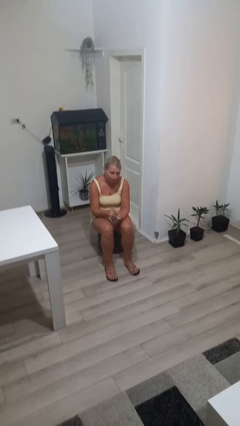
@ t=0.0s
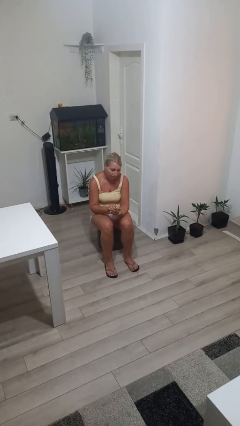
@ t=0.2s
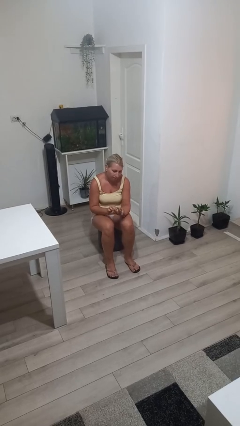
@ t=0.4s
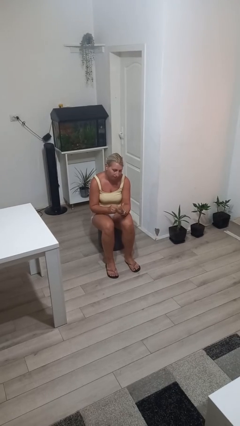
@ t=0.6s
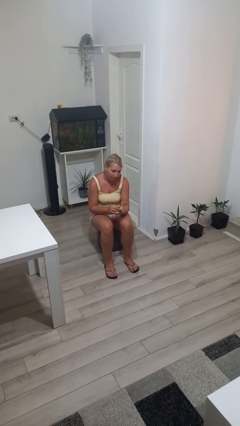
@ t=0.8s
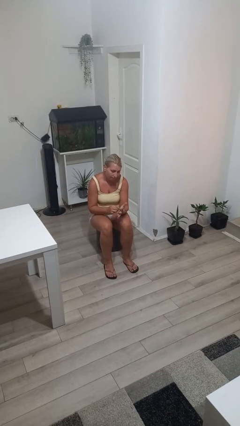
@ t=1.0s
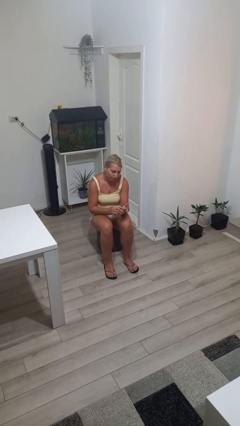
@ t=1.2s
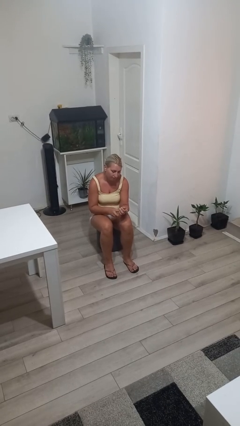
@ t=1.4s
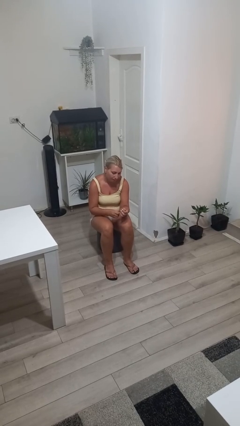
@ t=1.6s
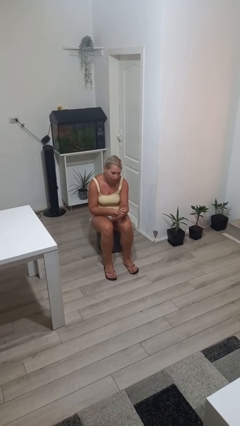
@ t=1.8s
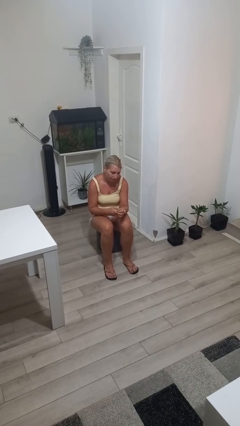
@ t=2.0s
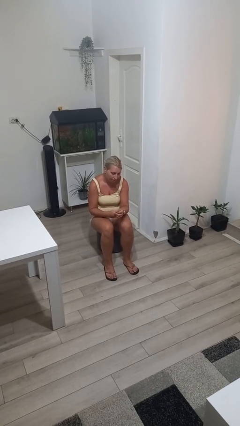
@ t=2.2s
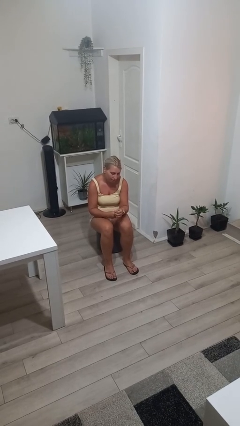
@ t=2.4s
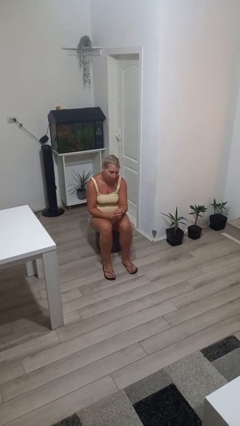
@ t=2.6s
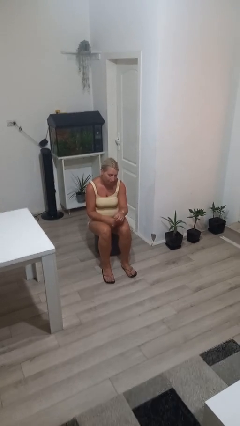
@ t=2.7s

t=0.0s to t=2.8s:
person puts on wristwatch

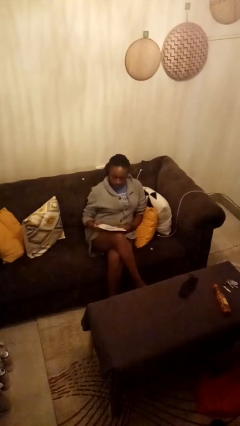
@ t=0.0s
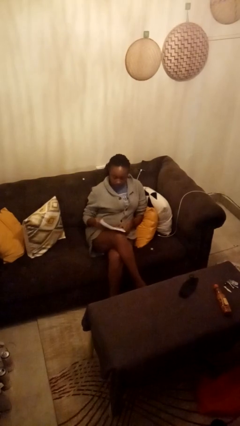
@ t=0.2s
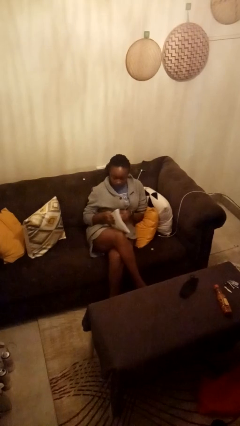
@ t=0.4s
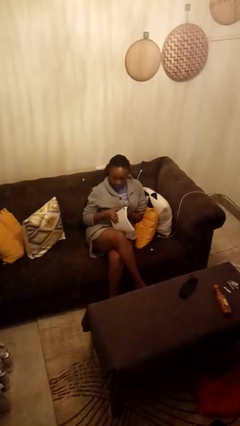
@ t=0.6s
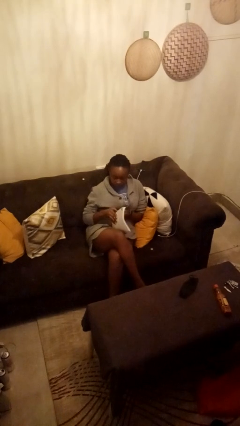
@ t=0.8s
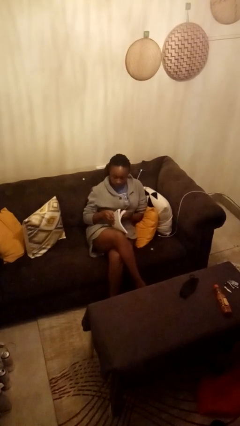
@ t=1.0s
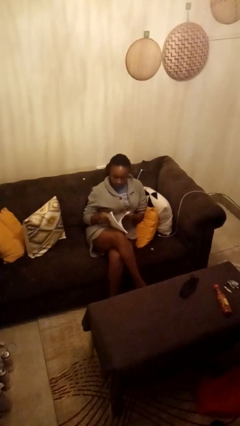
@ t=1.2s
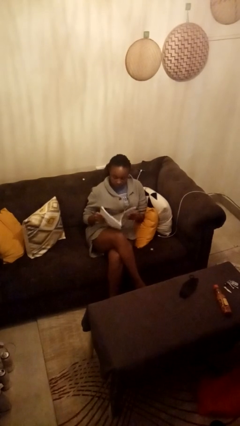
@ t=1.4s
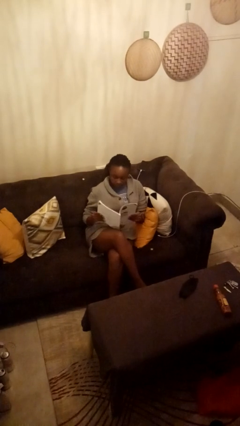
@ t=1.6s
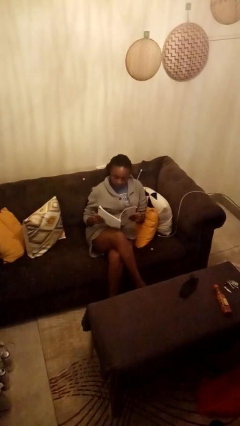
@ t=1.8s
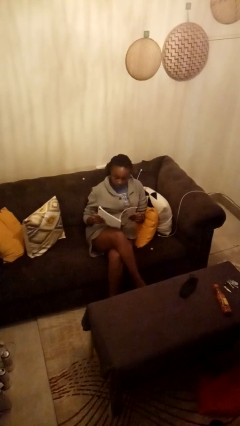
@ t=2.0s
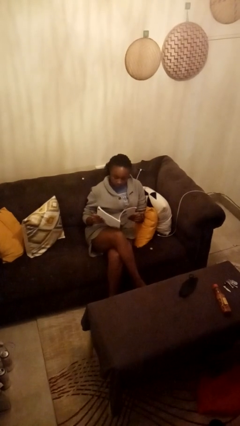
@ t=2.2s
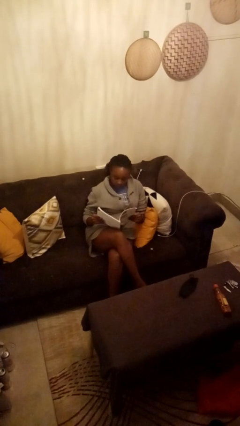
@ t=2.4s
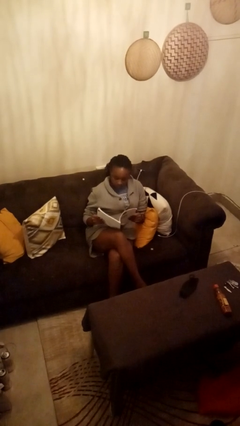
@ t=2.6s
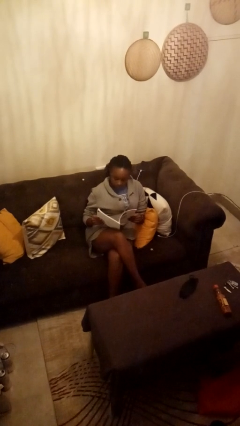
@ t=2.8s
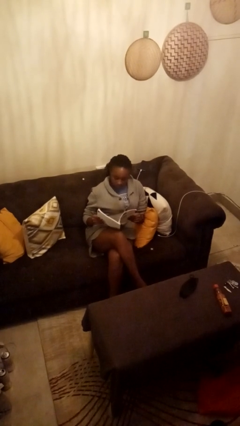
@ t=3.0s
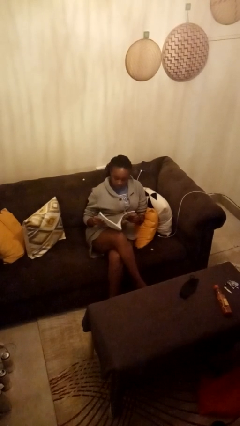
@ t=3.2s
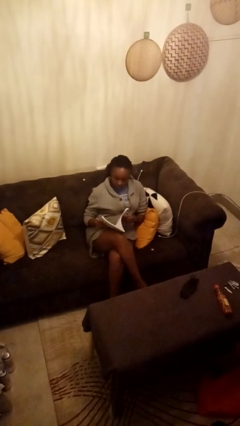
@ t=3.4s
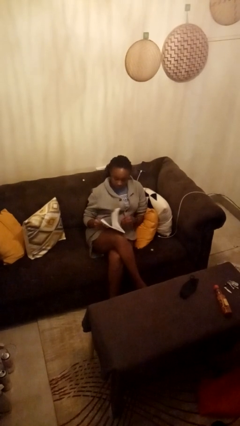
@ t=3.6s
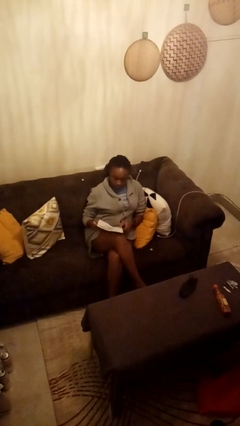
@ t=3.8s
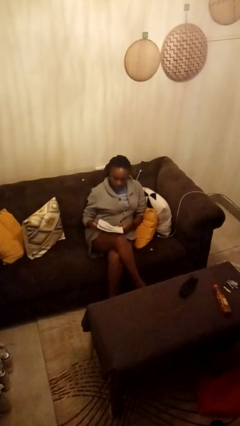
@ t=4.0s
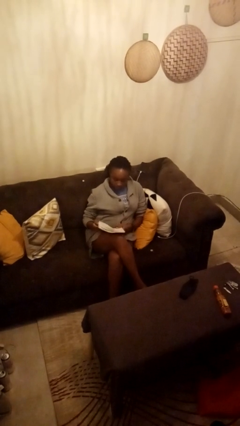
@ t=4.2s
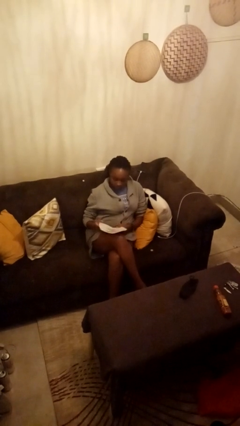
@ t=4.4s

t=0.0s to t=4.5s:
person reads magazine

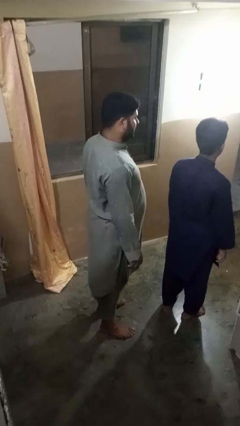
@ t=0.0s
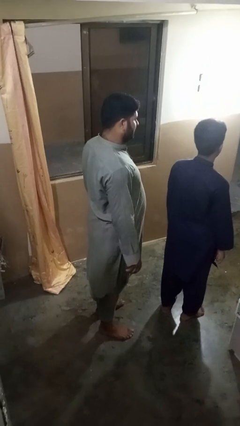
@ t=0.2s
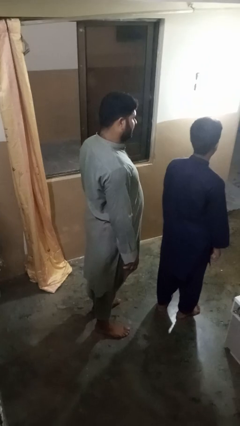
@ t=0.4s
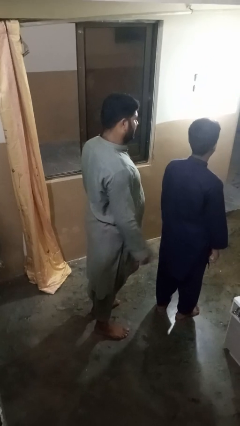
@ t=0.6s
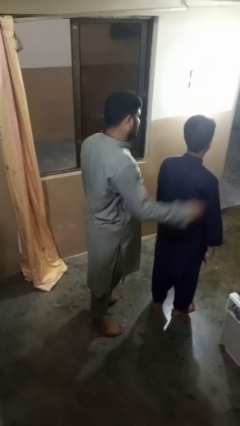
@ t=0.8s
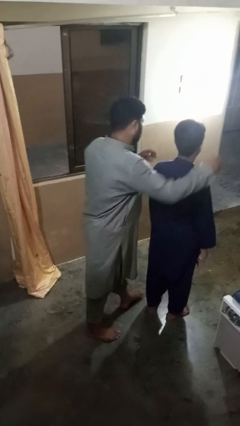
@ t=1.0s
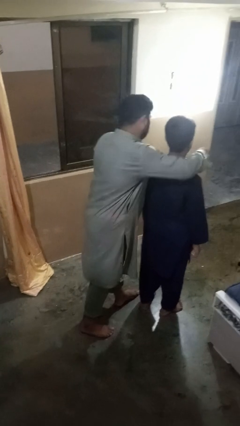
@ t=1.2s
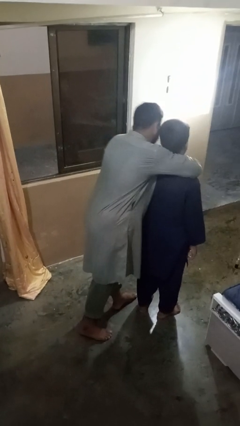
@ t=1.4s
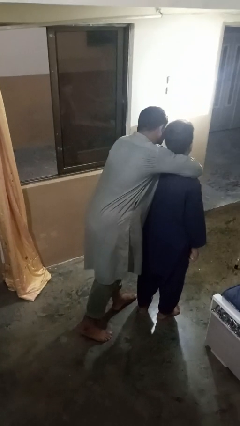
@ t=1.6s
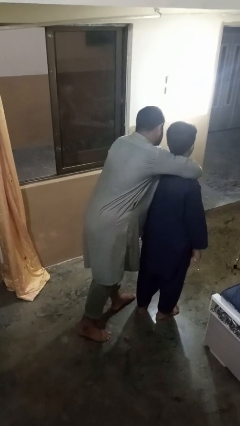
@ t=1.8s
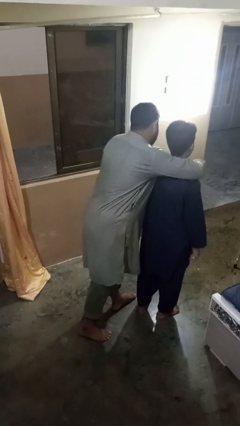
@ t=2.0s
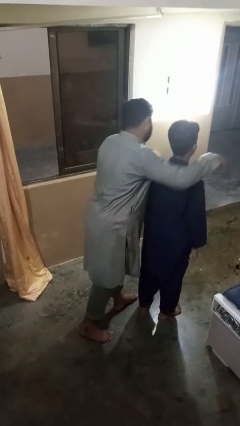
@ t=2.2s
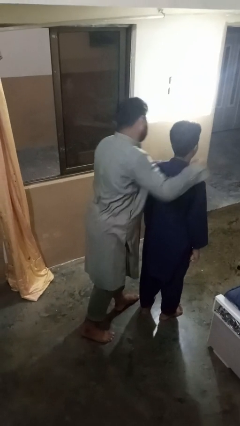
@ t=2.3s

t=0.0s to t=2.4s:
person hugs person from behind

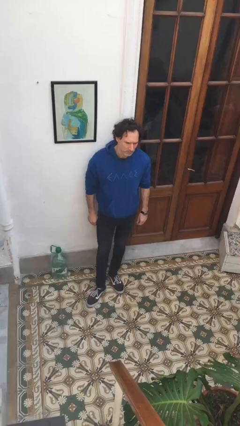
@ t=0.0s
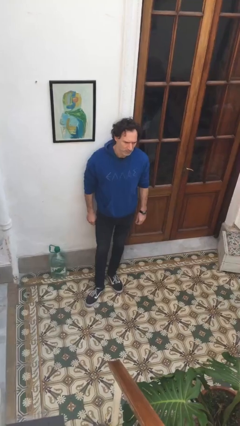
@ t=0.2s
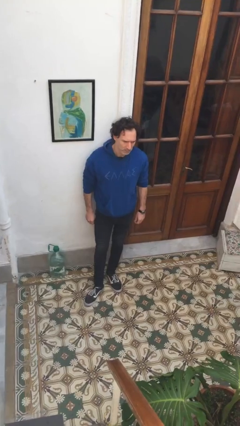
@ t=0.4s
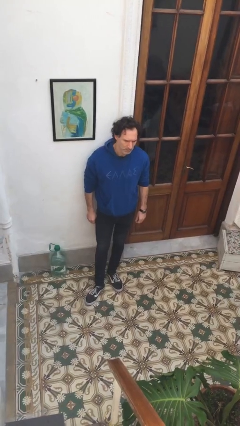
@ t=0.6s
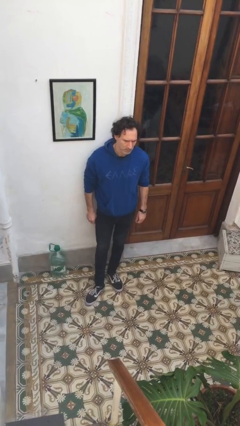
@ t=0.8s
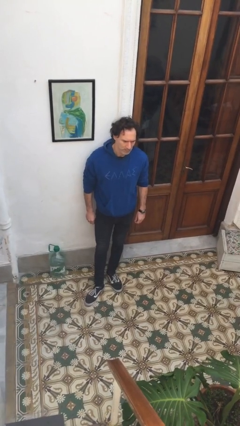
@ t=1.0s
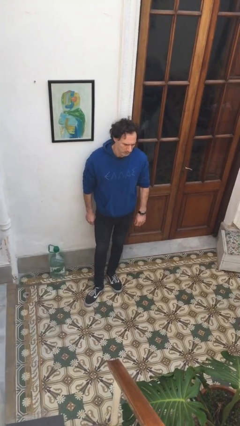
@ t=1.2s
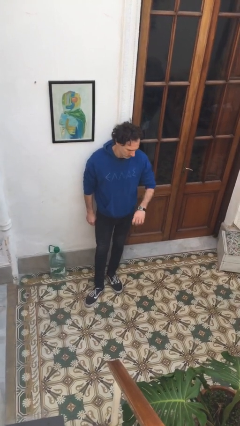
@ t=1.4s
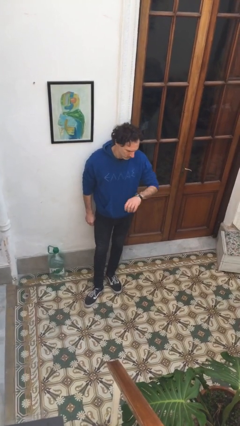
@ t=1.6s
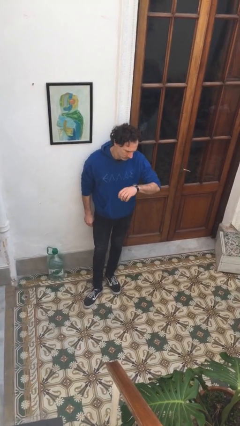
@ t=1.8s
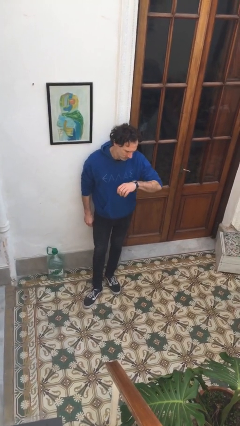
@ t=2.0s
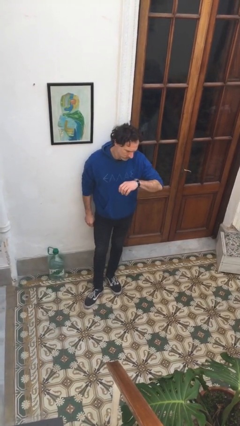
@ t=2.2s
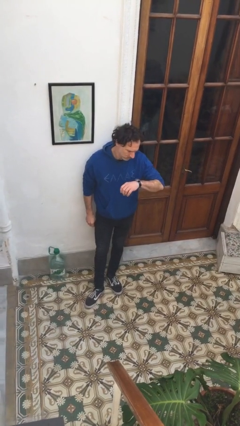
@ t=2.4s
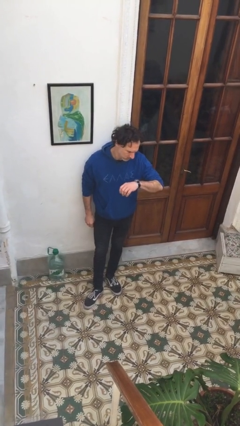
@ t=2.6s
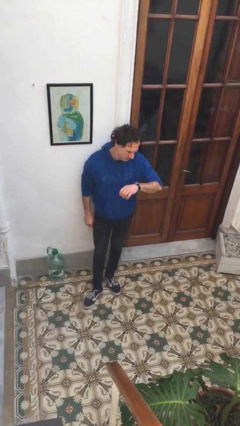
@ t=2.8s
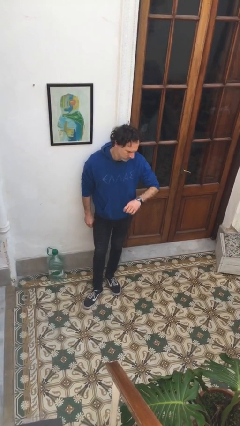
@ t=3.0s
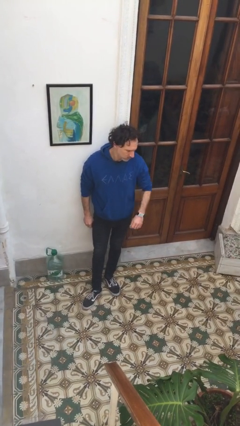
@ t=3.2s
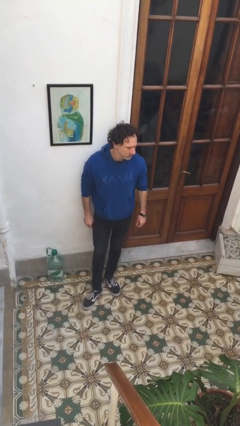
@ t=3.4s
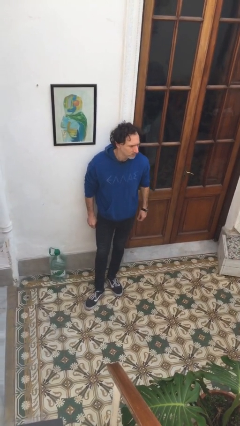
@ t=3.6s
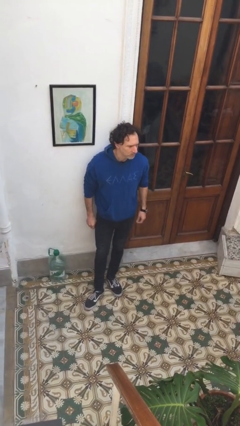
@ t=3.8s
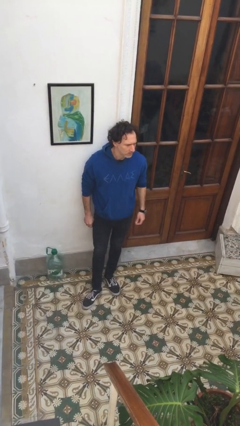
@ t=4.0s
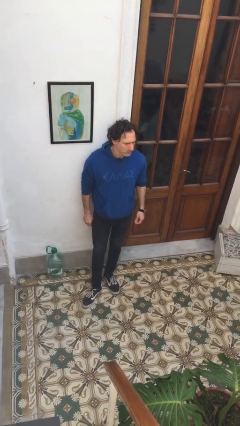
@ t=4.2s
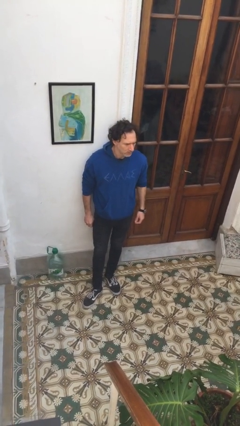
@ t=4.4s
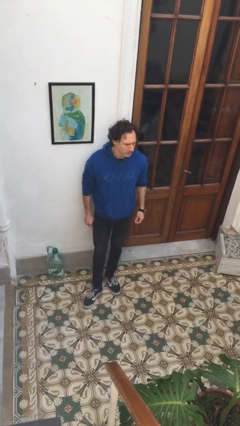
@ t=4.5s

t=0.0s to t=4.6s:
person looks at wristwatch

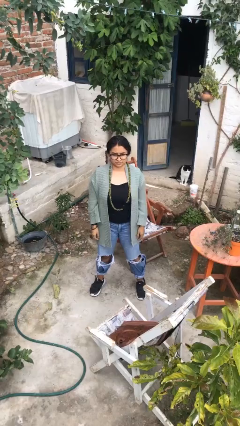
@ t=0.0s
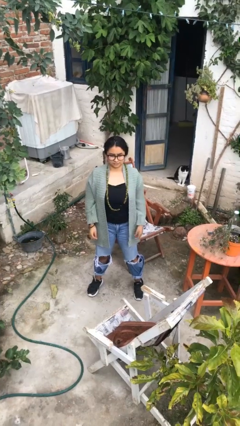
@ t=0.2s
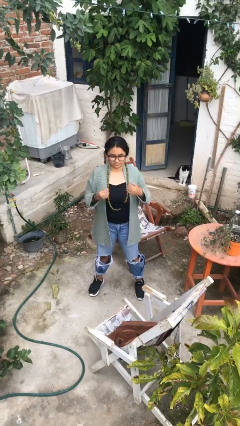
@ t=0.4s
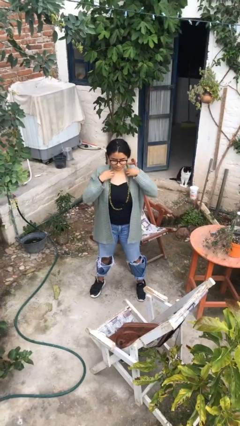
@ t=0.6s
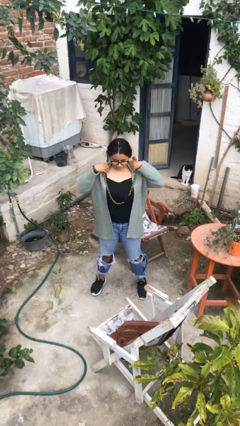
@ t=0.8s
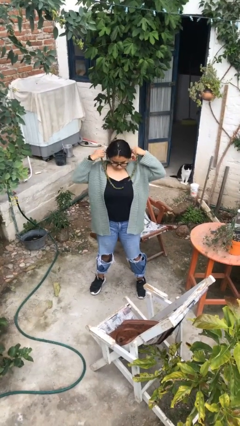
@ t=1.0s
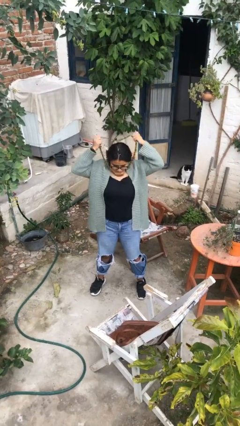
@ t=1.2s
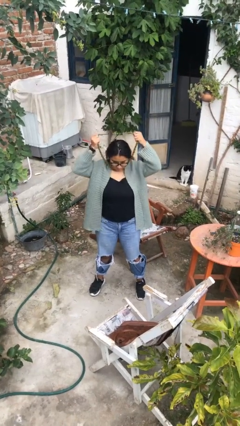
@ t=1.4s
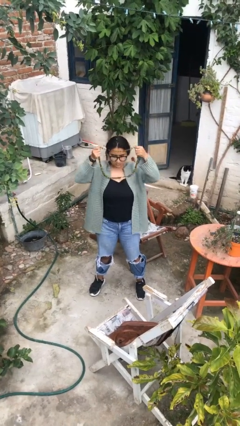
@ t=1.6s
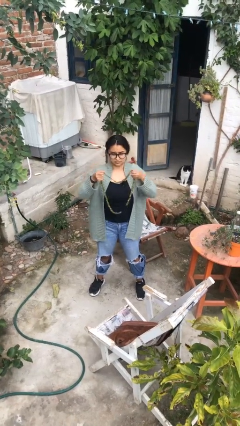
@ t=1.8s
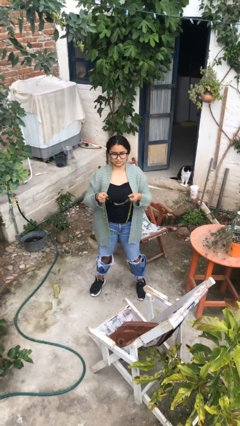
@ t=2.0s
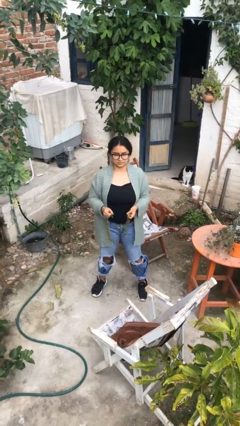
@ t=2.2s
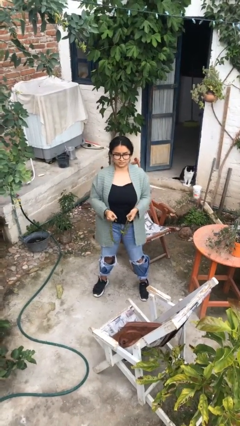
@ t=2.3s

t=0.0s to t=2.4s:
person takes off necklace

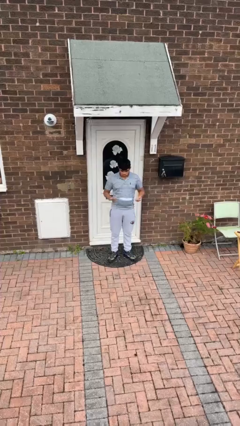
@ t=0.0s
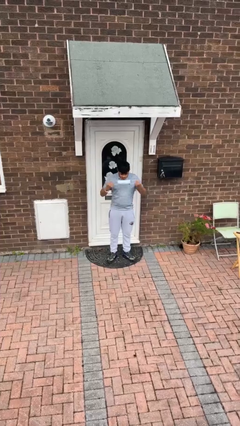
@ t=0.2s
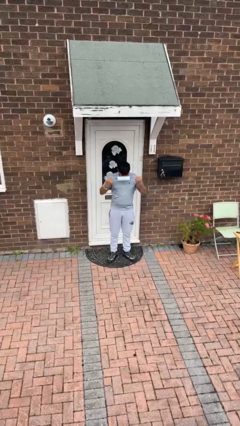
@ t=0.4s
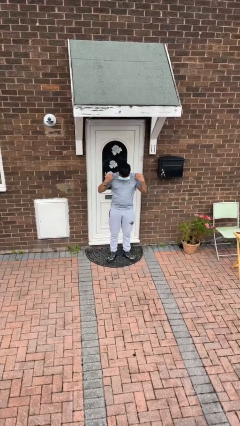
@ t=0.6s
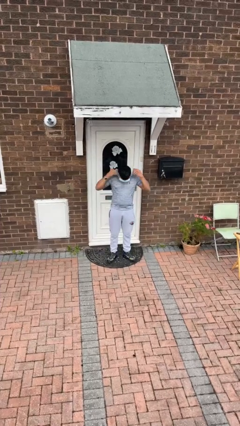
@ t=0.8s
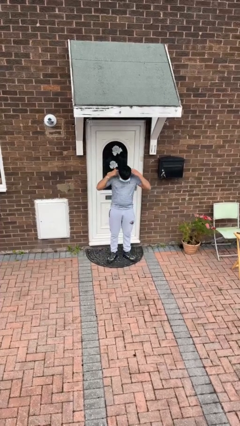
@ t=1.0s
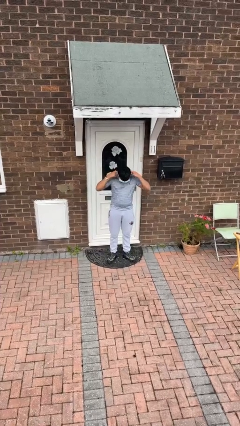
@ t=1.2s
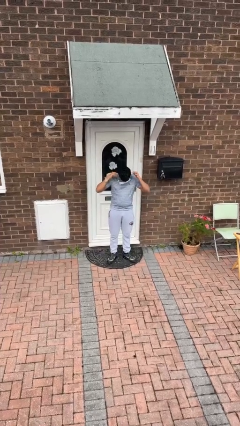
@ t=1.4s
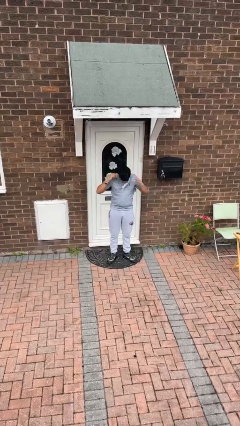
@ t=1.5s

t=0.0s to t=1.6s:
person puts on facemask
